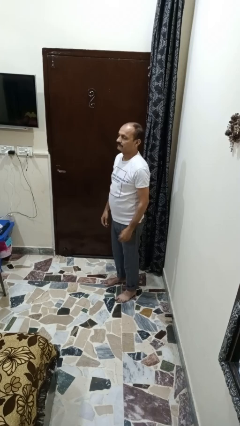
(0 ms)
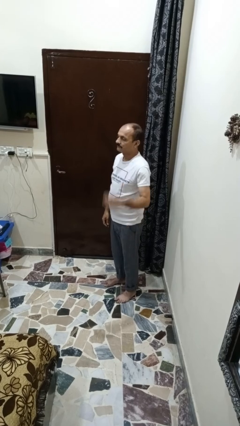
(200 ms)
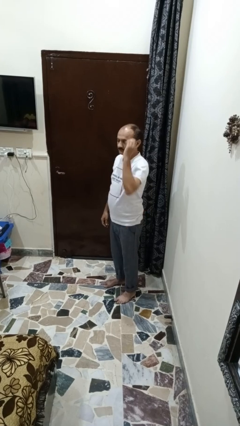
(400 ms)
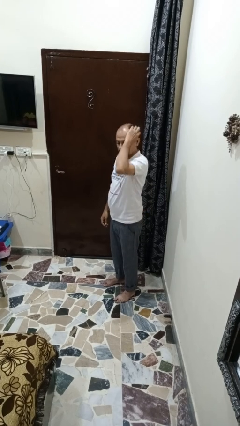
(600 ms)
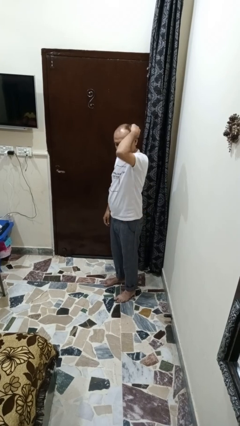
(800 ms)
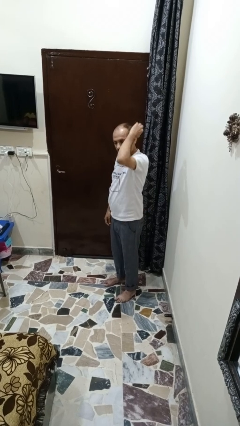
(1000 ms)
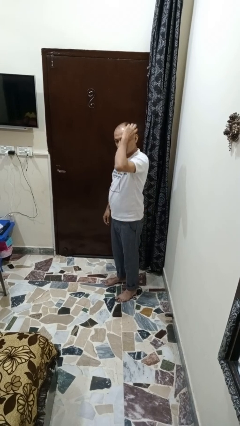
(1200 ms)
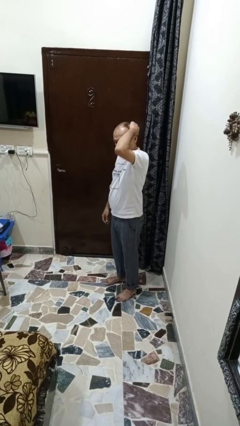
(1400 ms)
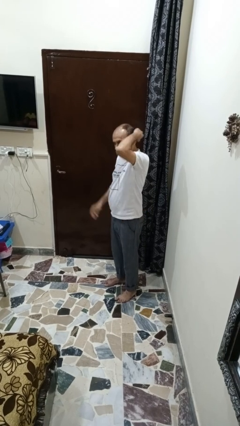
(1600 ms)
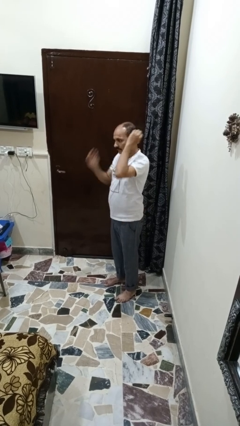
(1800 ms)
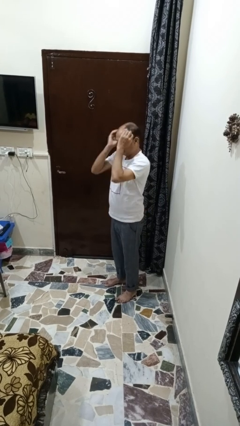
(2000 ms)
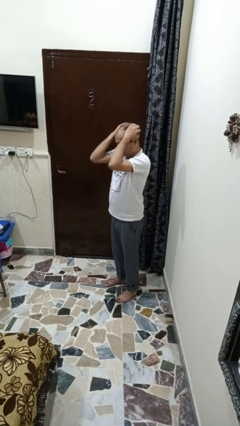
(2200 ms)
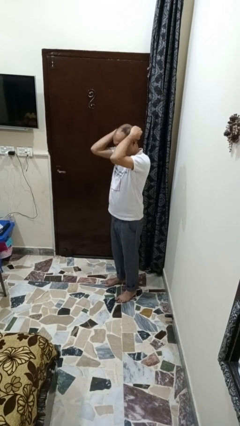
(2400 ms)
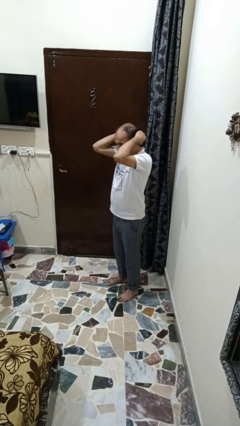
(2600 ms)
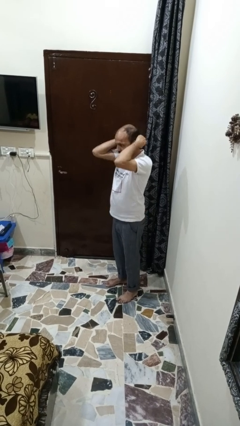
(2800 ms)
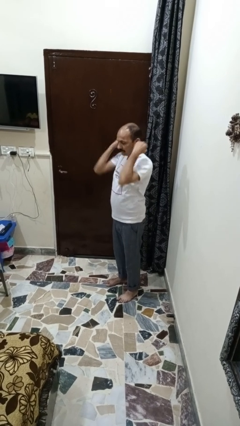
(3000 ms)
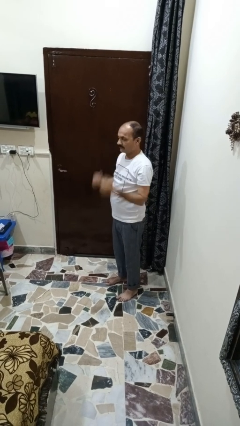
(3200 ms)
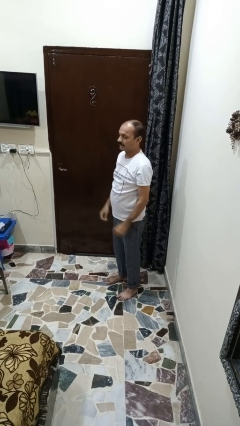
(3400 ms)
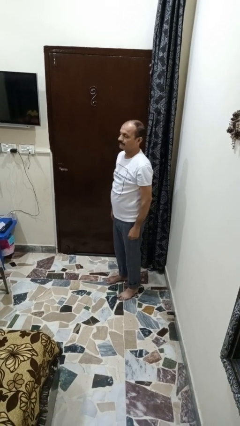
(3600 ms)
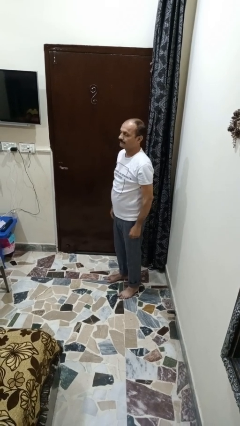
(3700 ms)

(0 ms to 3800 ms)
person strokes hair

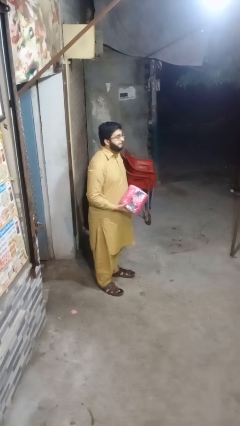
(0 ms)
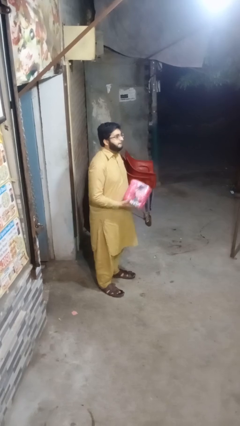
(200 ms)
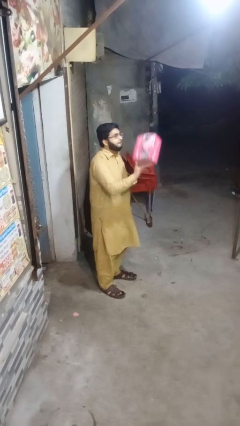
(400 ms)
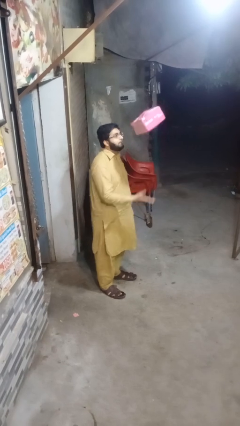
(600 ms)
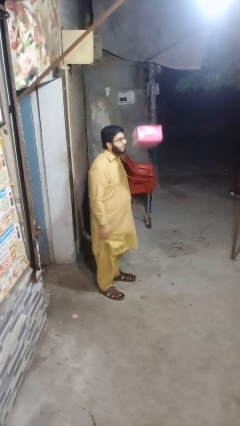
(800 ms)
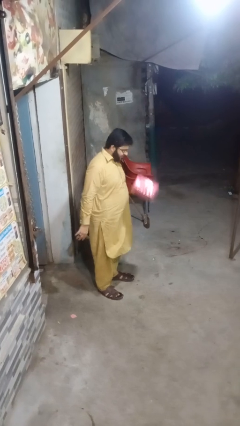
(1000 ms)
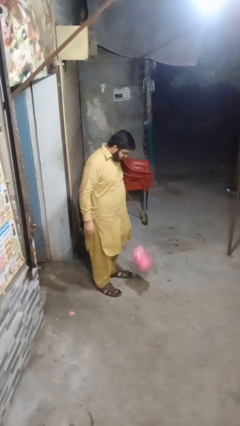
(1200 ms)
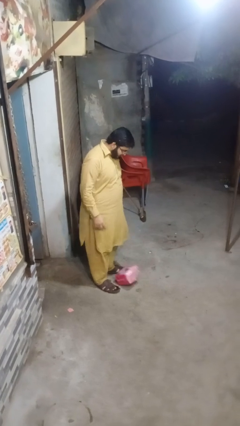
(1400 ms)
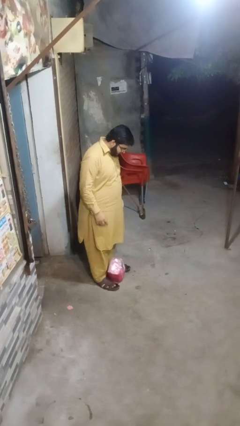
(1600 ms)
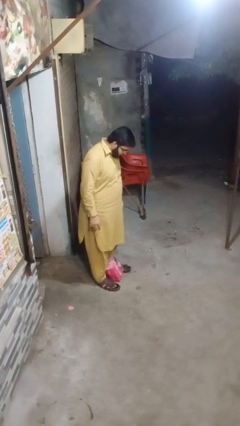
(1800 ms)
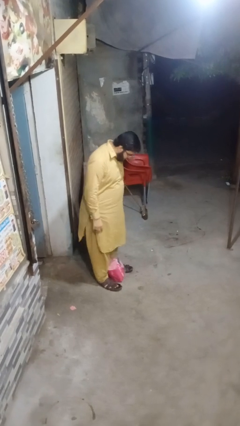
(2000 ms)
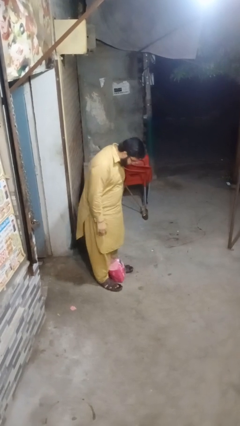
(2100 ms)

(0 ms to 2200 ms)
person throws object into air

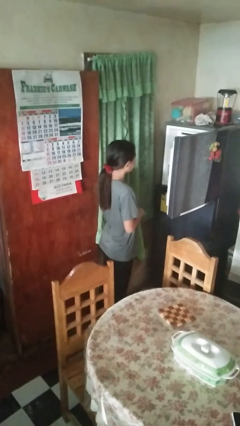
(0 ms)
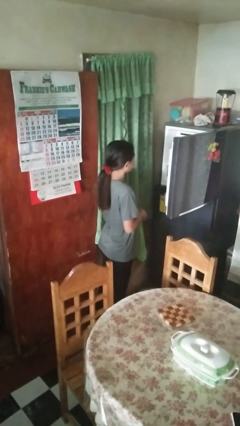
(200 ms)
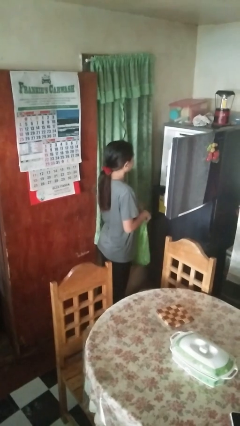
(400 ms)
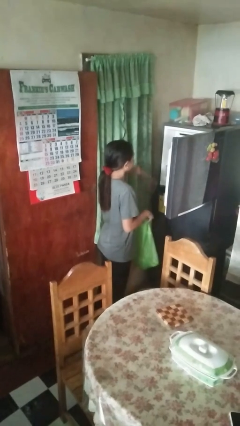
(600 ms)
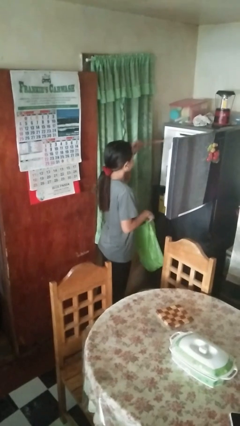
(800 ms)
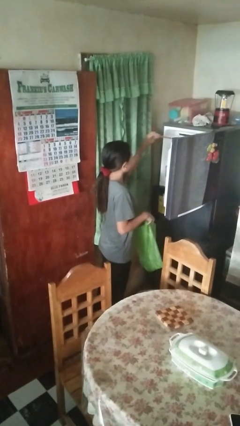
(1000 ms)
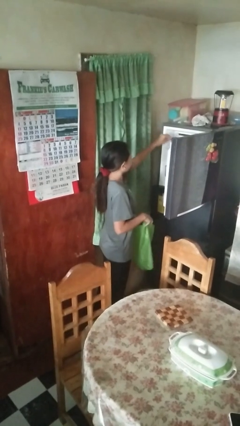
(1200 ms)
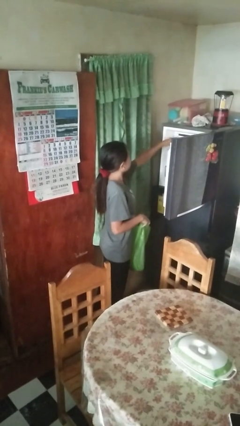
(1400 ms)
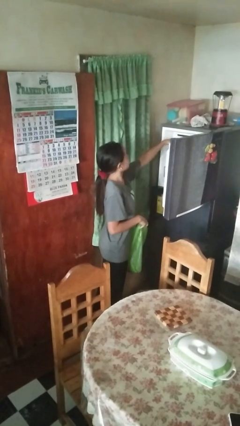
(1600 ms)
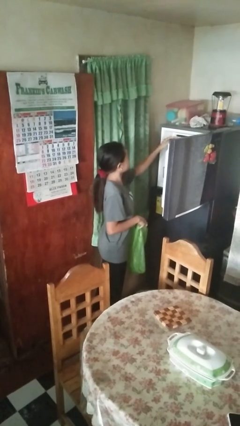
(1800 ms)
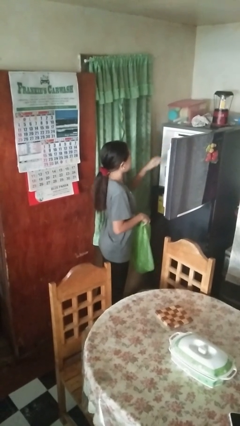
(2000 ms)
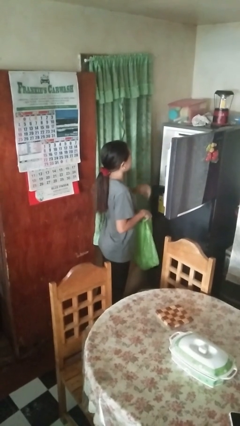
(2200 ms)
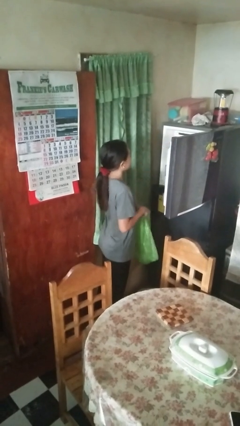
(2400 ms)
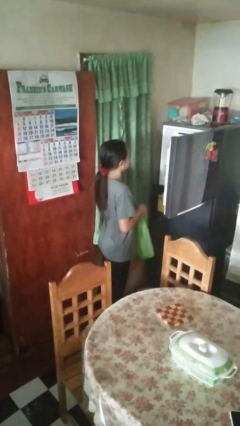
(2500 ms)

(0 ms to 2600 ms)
person loads groceries into refrigerator

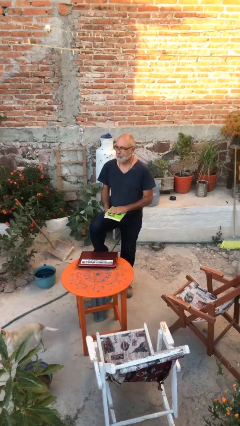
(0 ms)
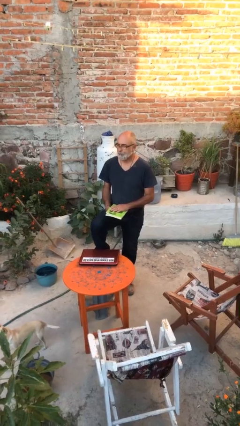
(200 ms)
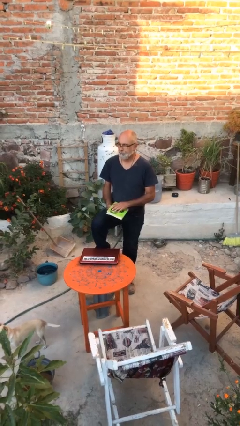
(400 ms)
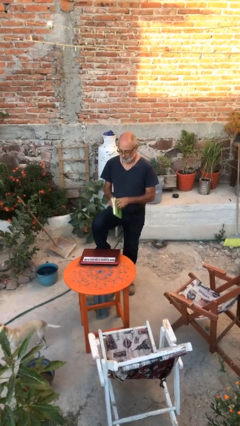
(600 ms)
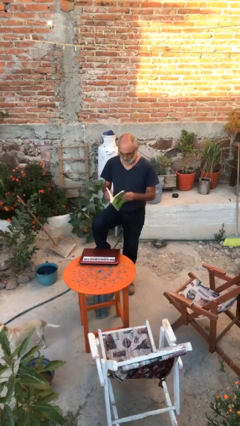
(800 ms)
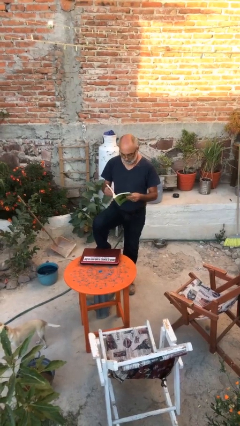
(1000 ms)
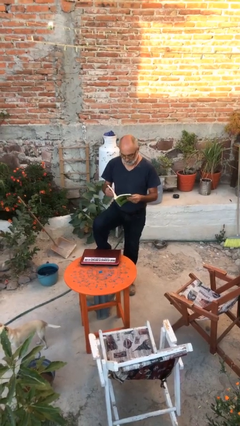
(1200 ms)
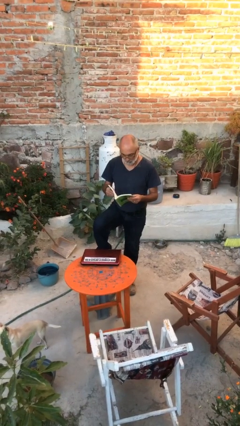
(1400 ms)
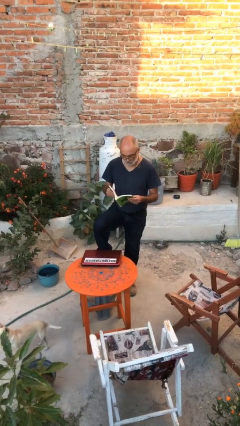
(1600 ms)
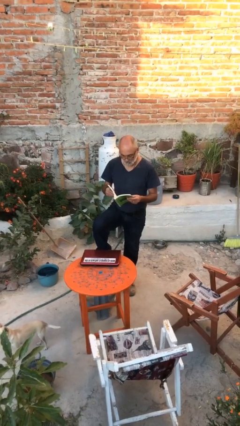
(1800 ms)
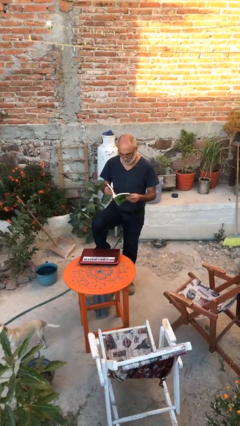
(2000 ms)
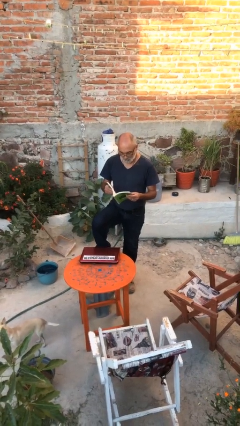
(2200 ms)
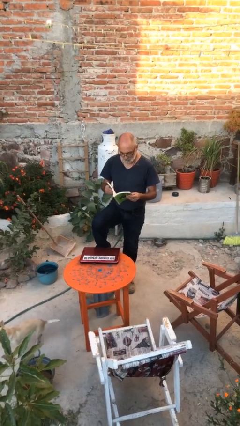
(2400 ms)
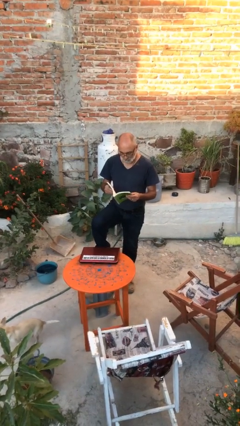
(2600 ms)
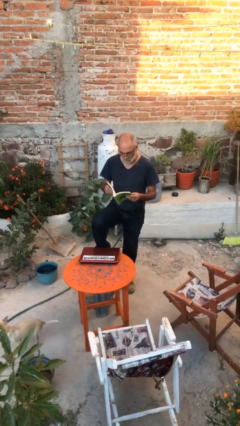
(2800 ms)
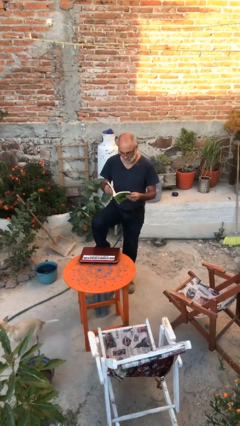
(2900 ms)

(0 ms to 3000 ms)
person reads document

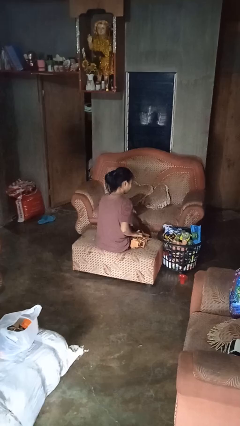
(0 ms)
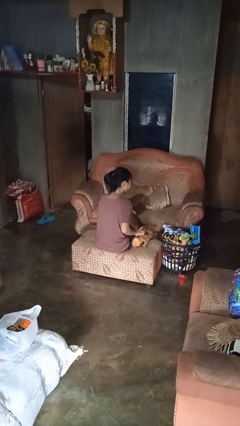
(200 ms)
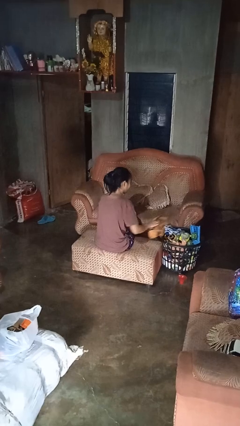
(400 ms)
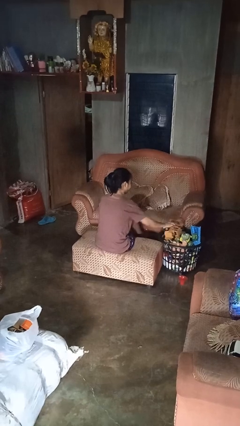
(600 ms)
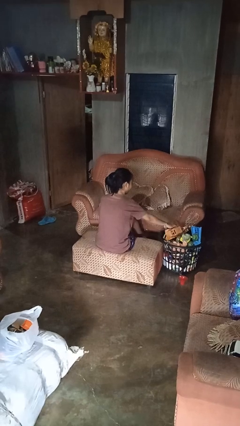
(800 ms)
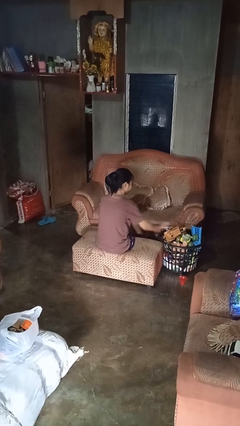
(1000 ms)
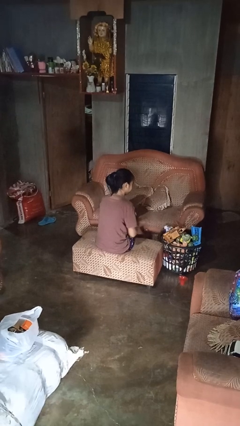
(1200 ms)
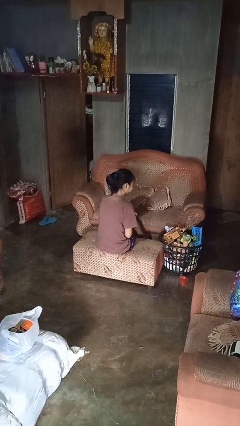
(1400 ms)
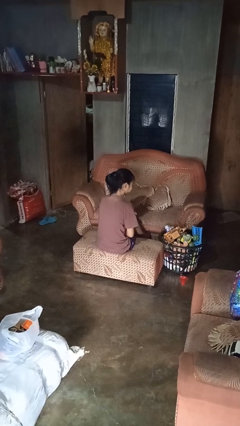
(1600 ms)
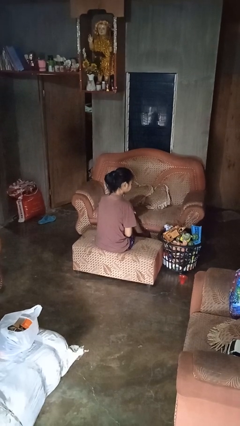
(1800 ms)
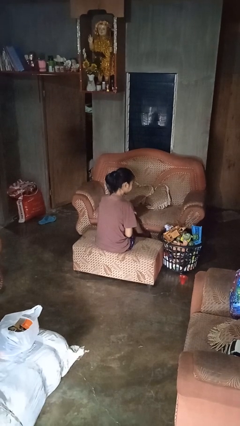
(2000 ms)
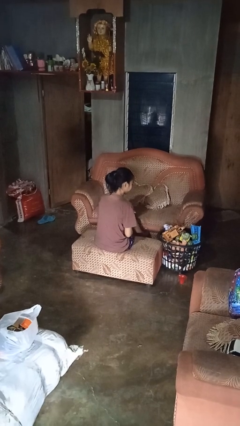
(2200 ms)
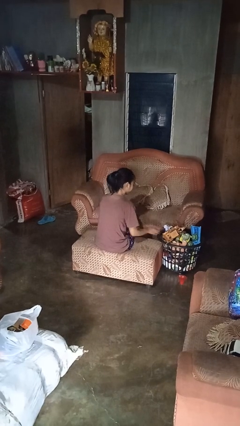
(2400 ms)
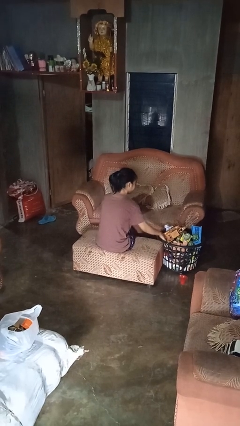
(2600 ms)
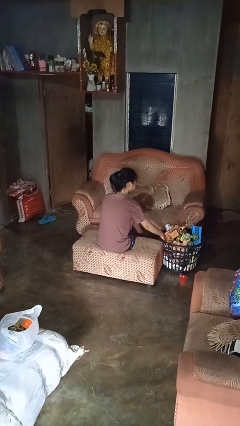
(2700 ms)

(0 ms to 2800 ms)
person puts object into basket

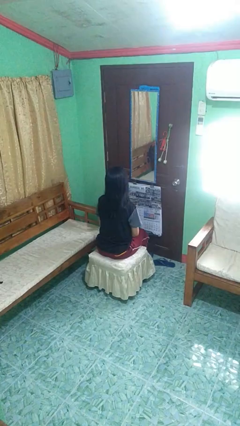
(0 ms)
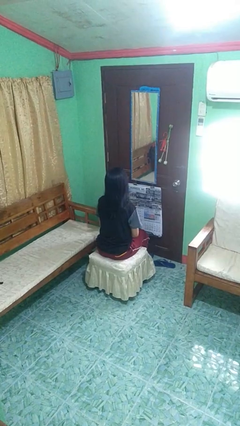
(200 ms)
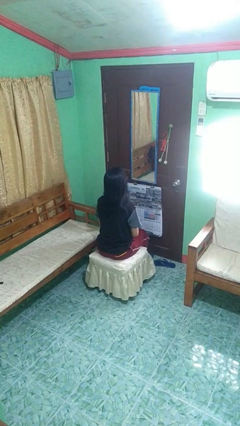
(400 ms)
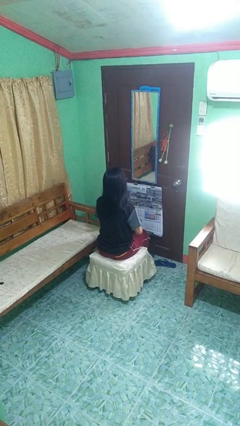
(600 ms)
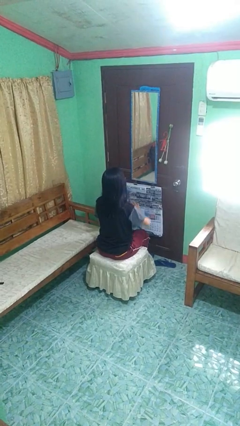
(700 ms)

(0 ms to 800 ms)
person gestures swipe down

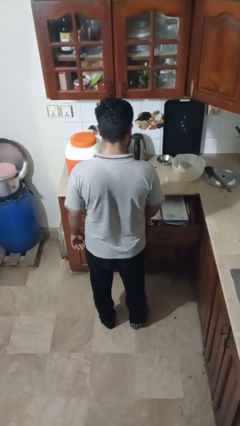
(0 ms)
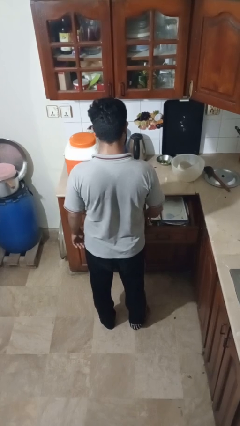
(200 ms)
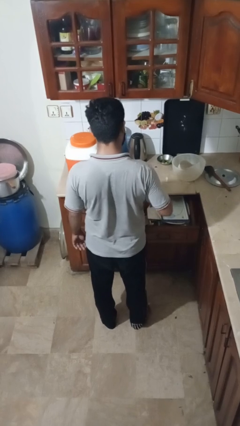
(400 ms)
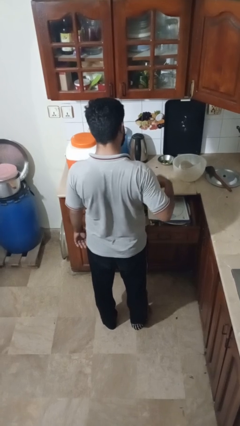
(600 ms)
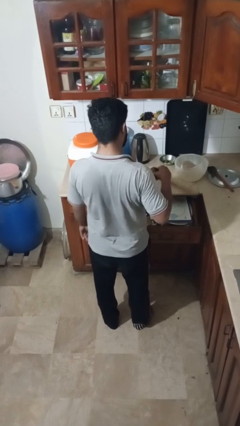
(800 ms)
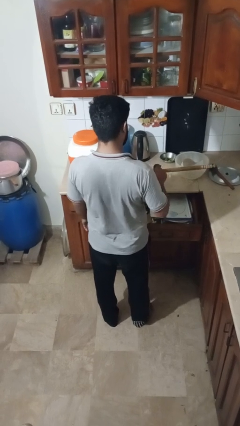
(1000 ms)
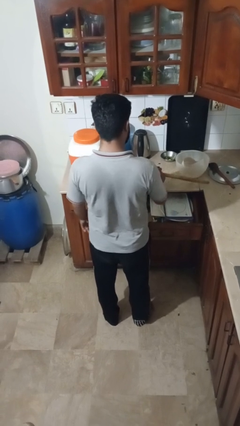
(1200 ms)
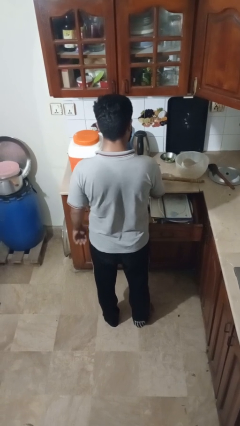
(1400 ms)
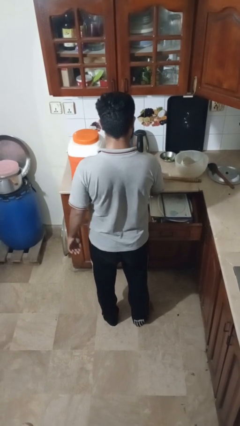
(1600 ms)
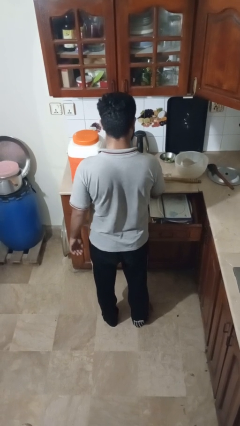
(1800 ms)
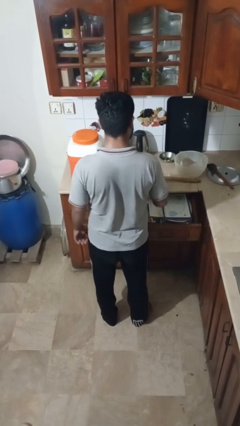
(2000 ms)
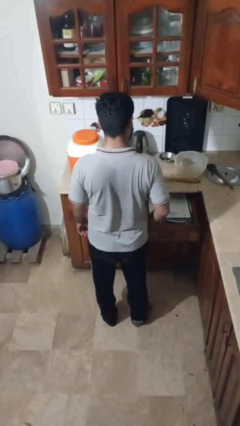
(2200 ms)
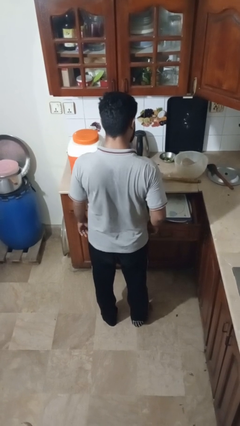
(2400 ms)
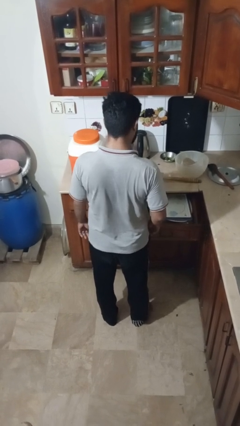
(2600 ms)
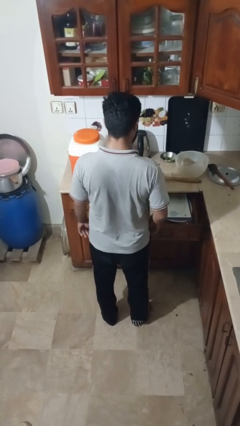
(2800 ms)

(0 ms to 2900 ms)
person takes object from kitchen drawer
